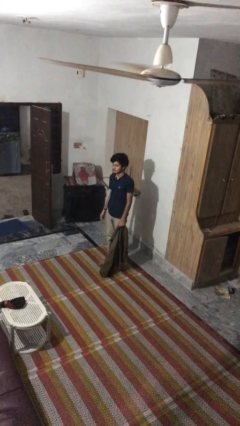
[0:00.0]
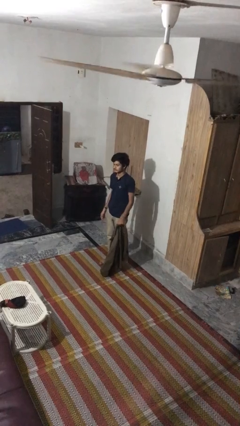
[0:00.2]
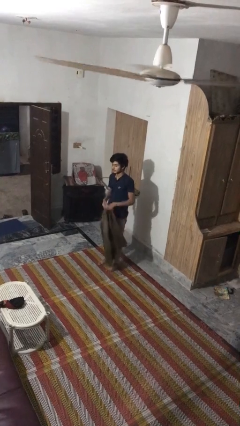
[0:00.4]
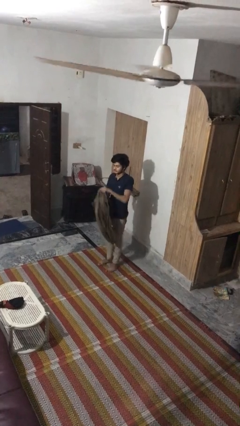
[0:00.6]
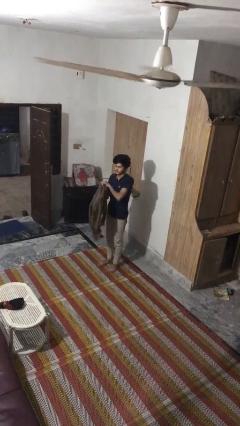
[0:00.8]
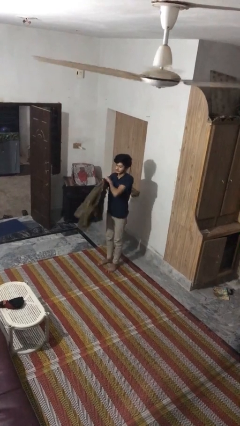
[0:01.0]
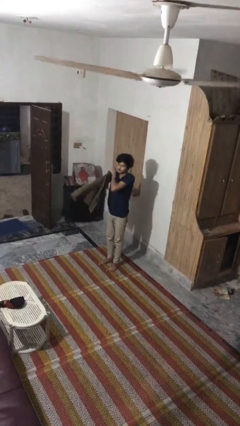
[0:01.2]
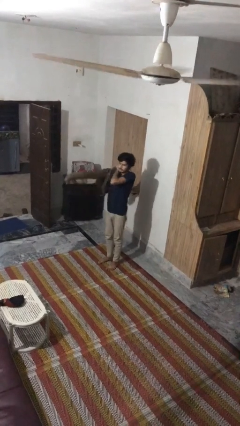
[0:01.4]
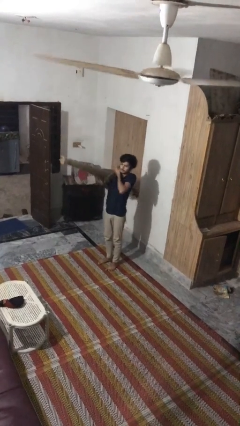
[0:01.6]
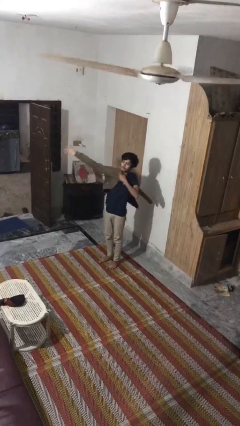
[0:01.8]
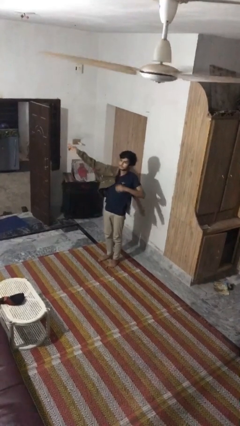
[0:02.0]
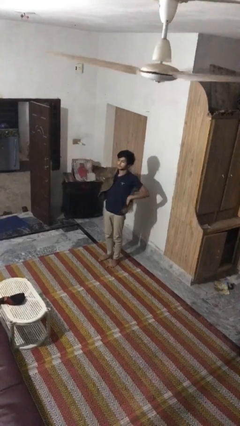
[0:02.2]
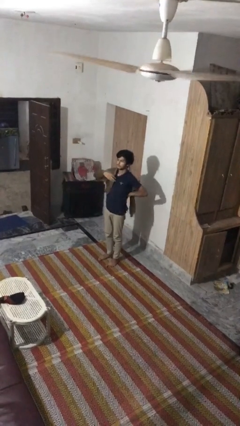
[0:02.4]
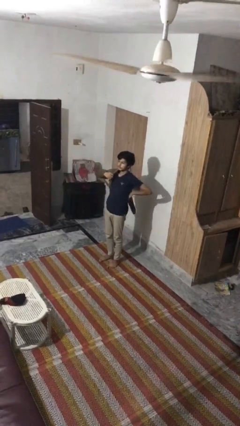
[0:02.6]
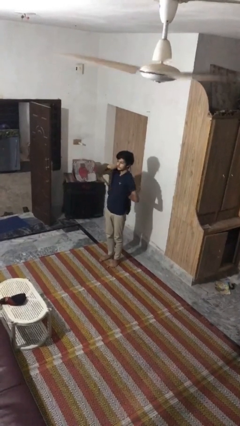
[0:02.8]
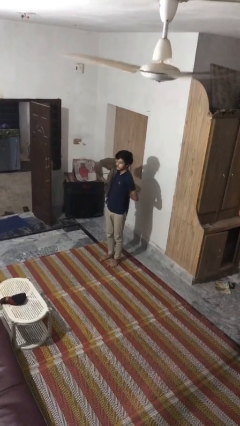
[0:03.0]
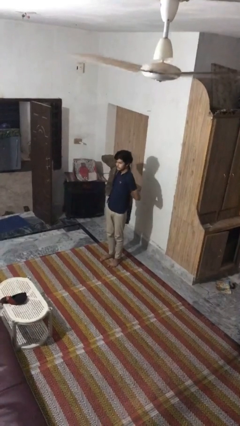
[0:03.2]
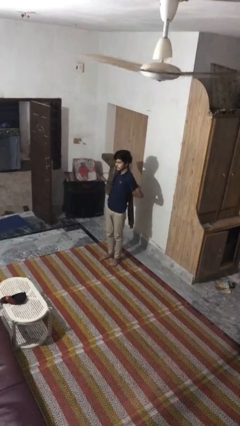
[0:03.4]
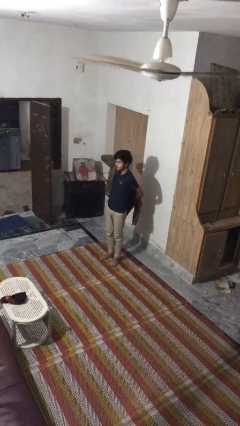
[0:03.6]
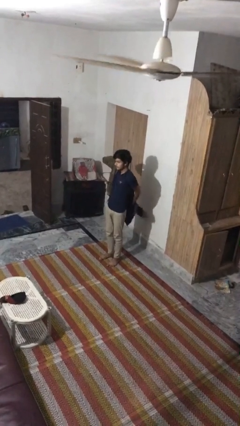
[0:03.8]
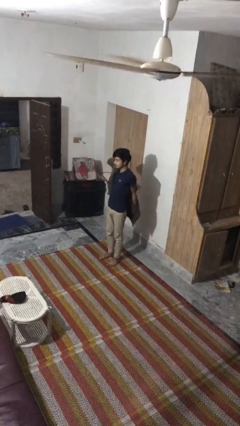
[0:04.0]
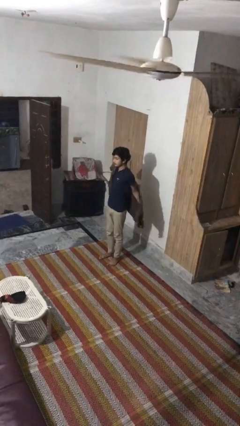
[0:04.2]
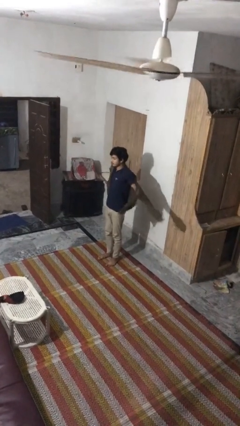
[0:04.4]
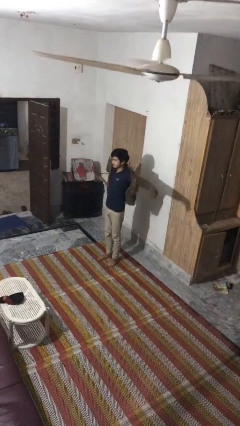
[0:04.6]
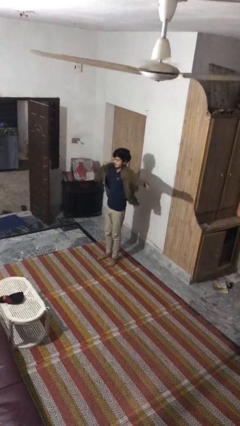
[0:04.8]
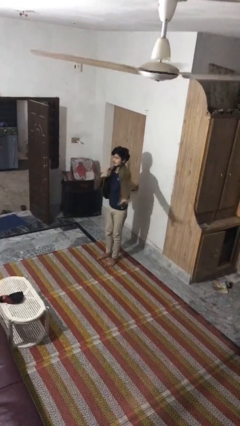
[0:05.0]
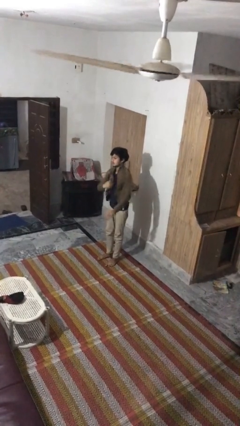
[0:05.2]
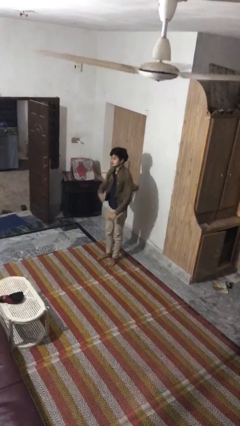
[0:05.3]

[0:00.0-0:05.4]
person puts on jacket

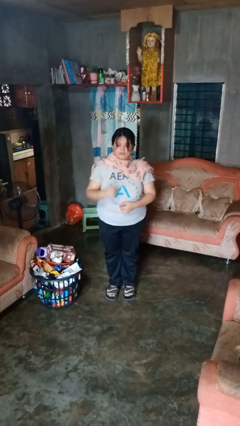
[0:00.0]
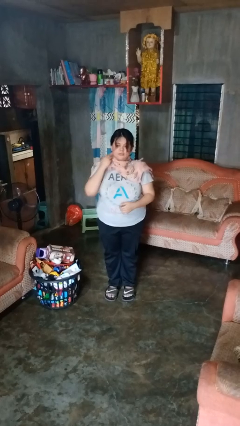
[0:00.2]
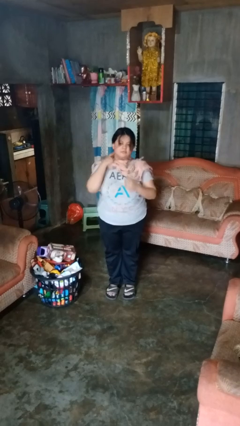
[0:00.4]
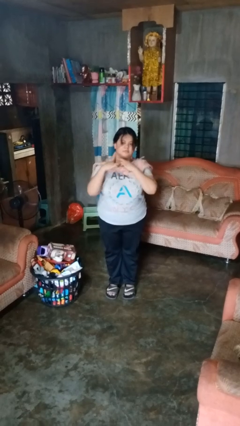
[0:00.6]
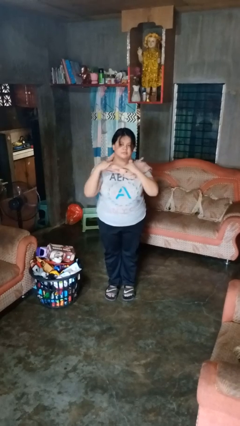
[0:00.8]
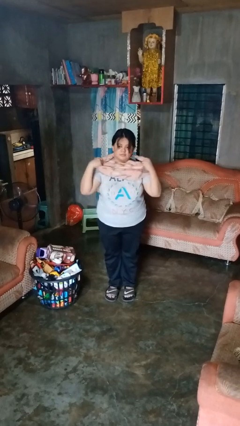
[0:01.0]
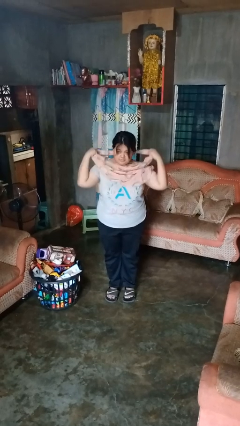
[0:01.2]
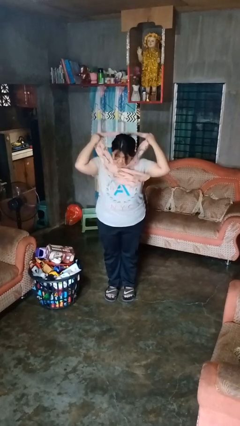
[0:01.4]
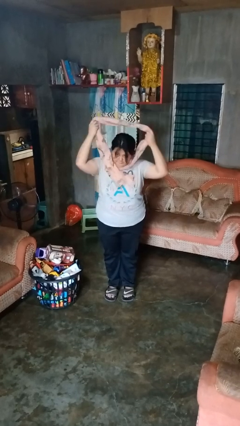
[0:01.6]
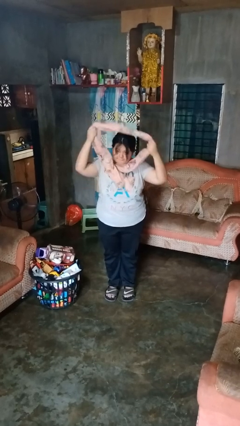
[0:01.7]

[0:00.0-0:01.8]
person takes off scarf

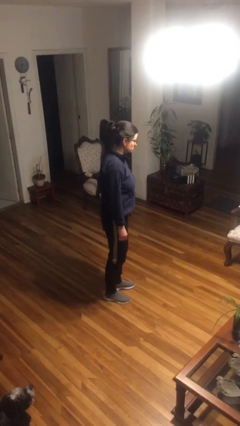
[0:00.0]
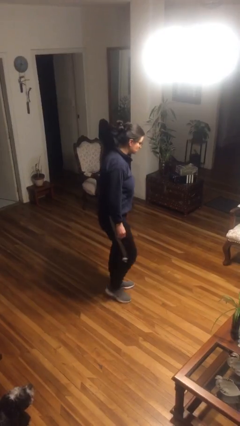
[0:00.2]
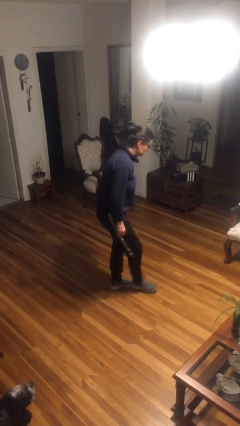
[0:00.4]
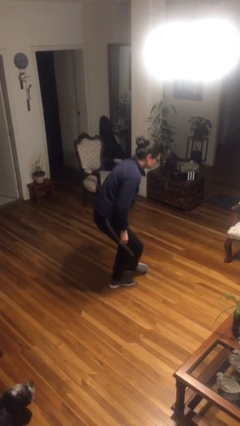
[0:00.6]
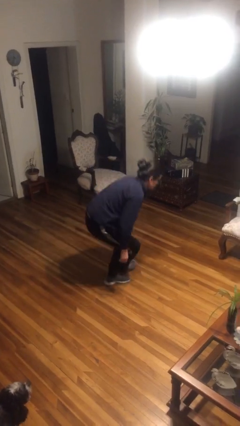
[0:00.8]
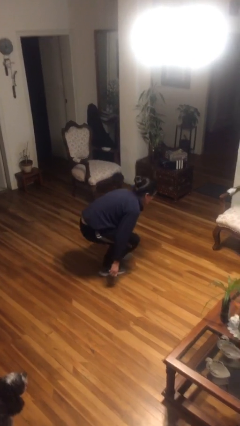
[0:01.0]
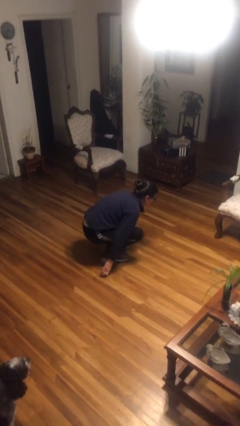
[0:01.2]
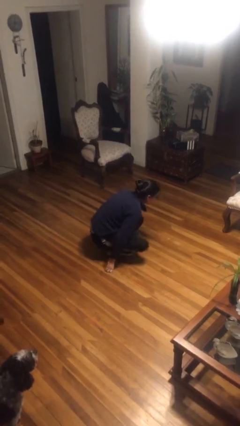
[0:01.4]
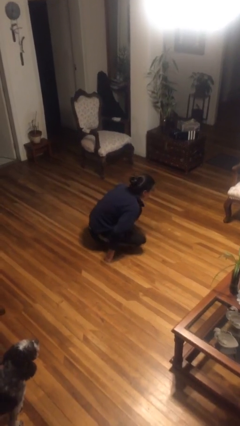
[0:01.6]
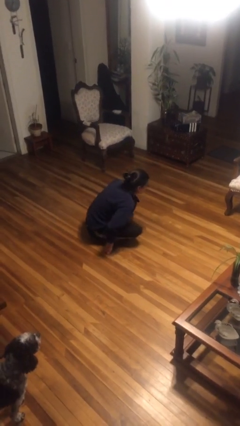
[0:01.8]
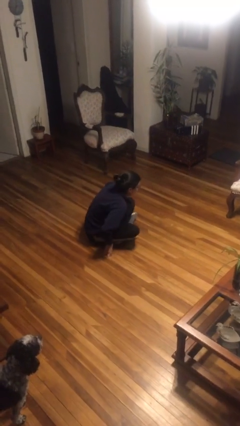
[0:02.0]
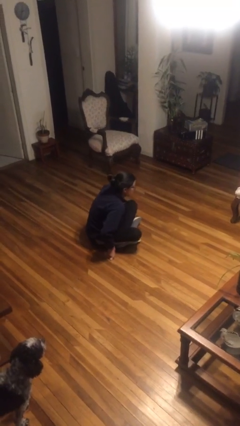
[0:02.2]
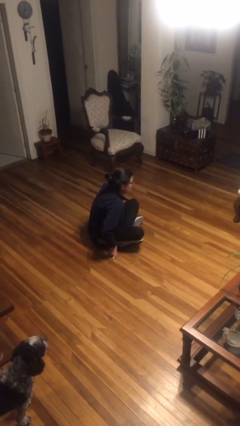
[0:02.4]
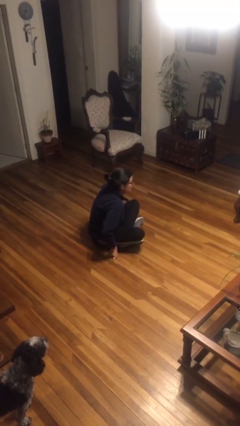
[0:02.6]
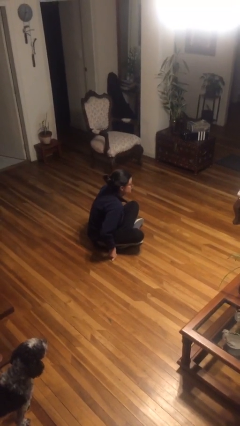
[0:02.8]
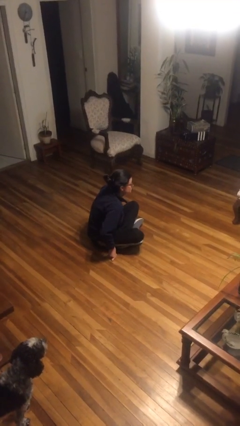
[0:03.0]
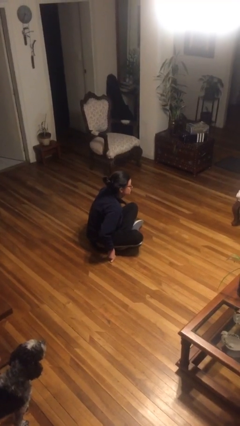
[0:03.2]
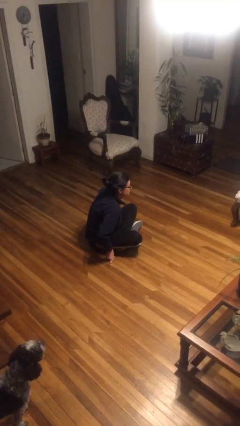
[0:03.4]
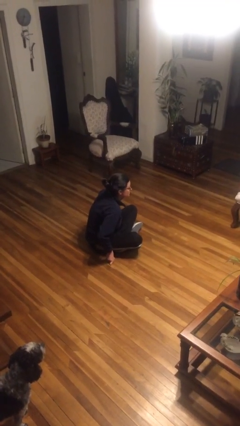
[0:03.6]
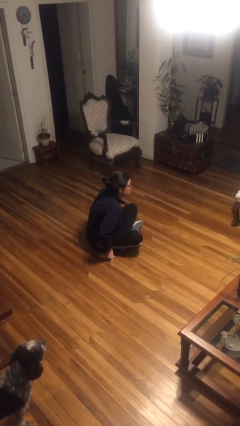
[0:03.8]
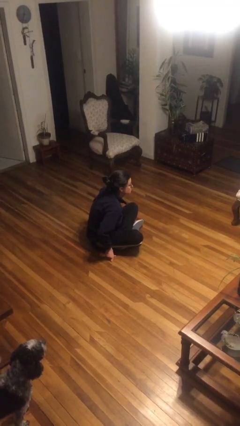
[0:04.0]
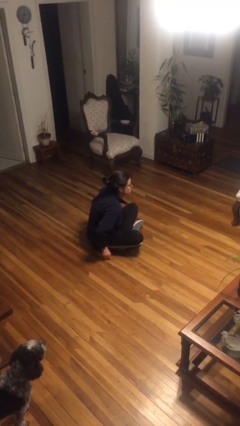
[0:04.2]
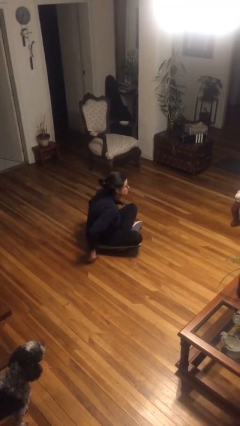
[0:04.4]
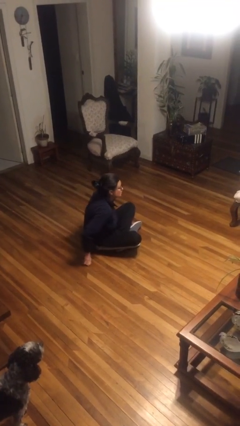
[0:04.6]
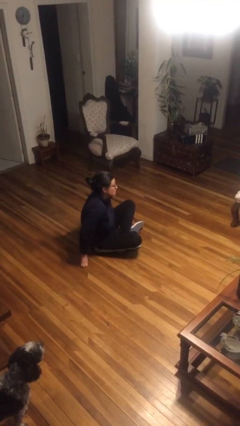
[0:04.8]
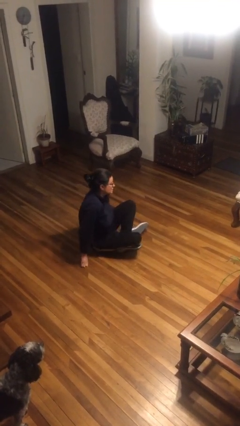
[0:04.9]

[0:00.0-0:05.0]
person sits crisscross

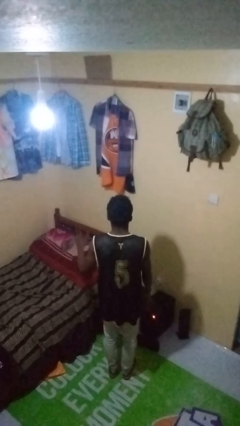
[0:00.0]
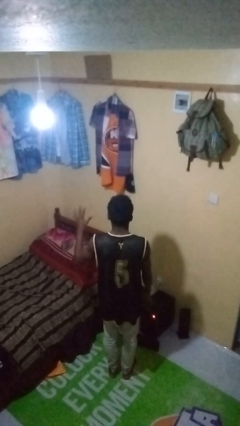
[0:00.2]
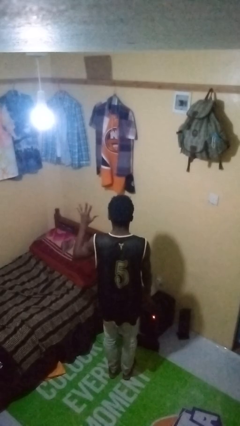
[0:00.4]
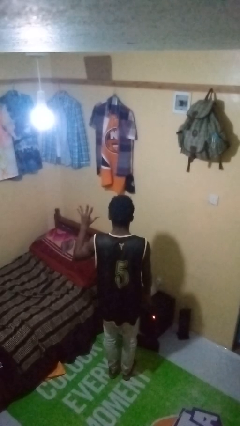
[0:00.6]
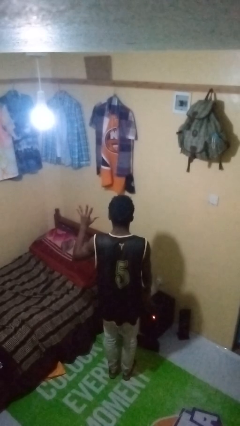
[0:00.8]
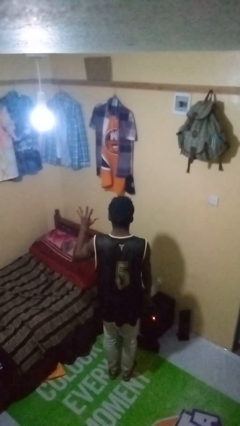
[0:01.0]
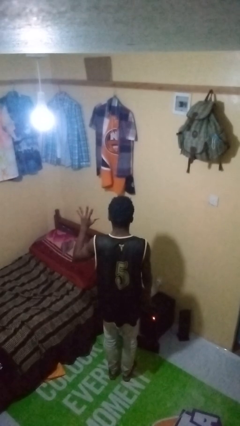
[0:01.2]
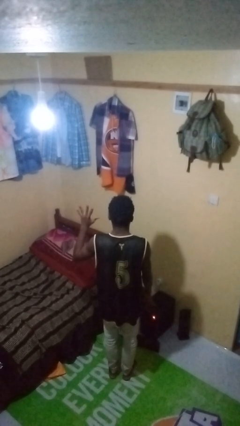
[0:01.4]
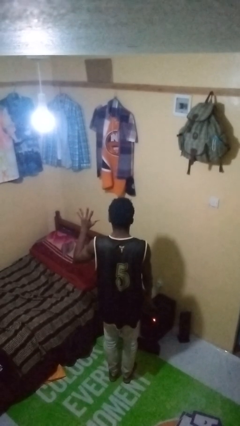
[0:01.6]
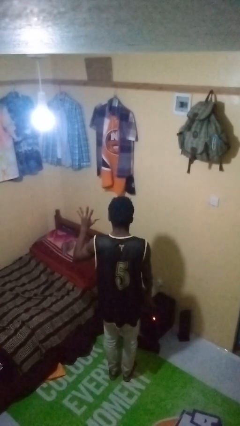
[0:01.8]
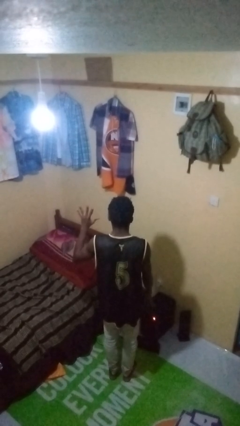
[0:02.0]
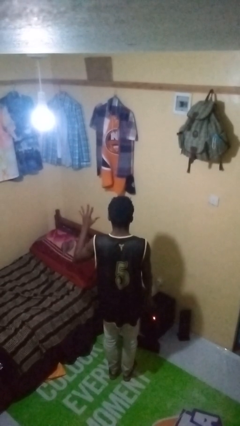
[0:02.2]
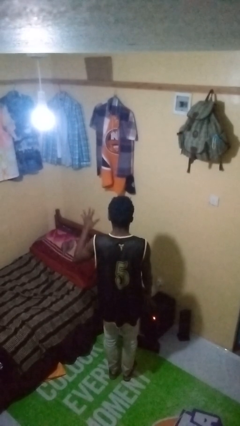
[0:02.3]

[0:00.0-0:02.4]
person gestures number five

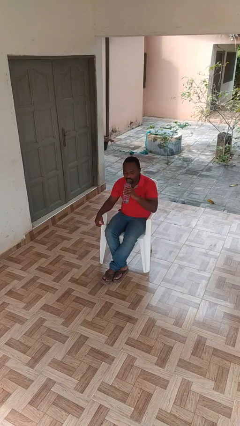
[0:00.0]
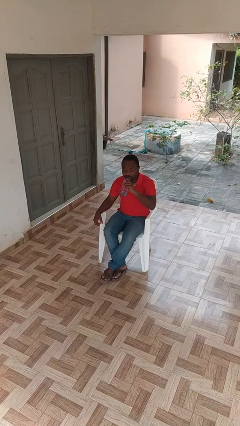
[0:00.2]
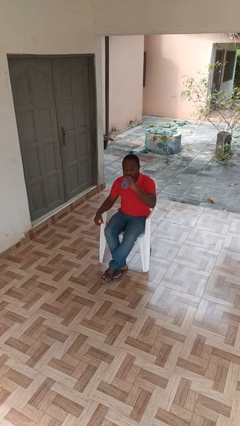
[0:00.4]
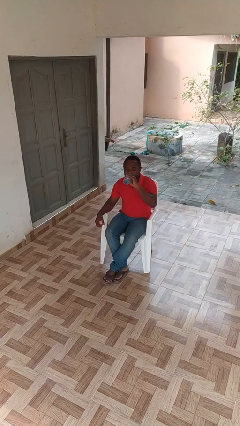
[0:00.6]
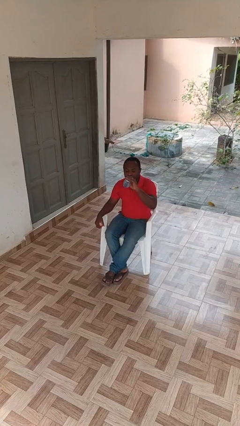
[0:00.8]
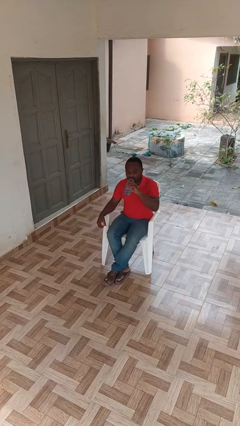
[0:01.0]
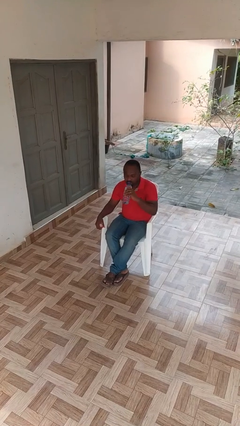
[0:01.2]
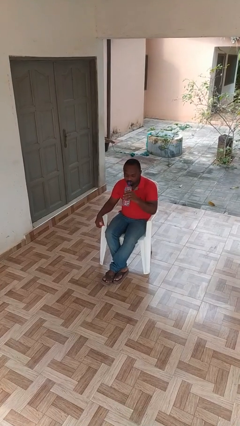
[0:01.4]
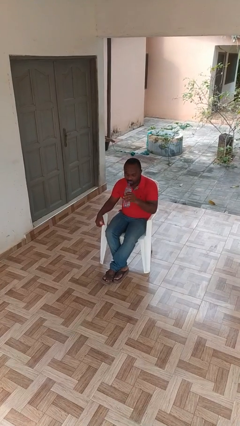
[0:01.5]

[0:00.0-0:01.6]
person drinks from bottle

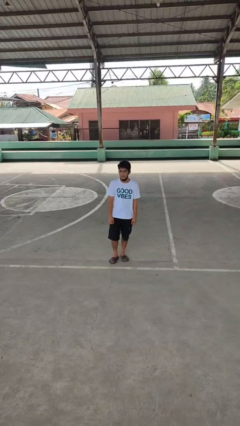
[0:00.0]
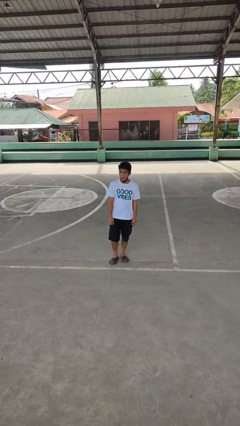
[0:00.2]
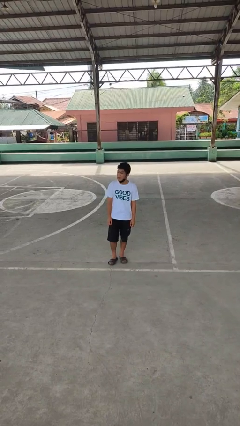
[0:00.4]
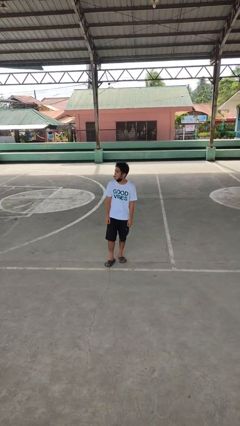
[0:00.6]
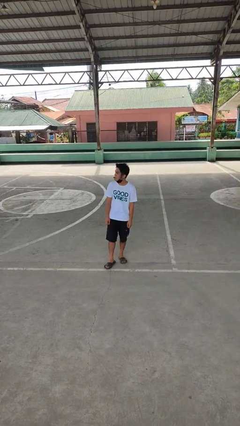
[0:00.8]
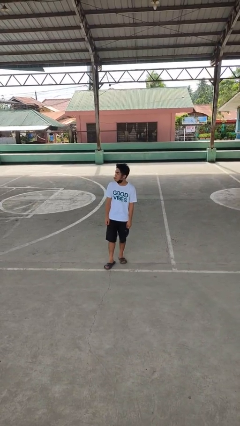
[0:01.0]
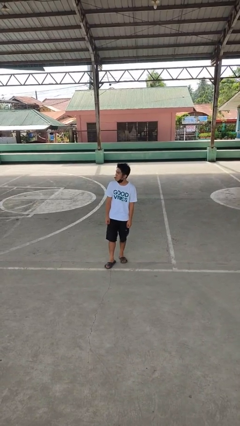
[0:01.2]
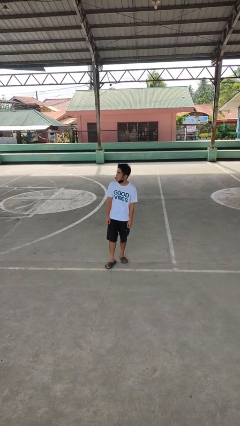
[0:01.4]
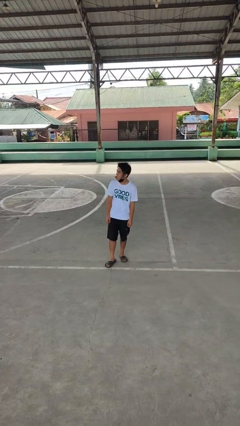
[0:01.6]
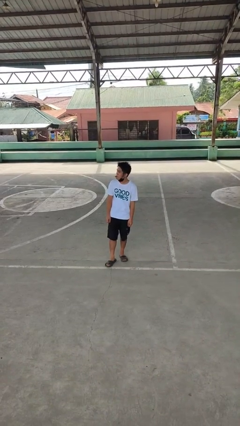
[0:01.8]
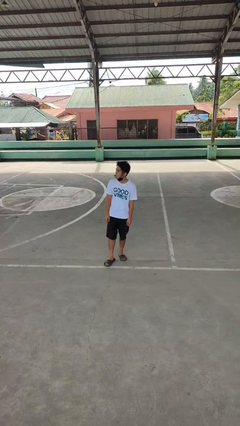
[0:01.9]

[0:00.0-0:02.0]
person sticks out tongue
